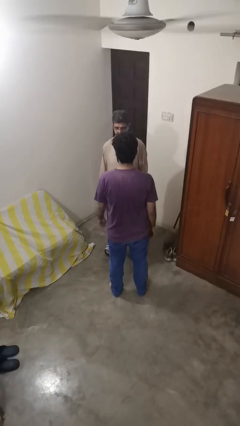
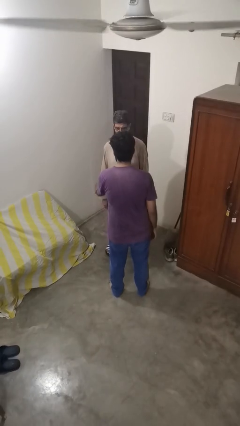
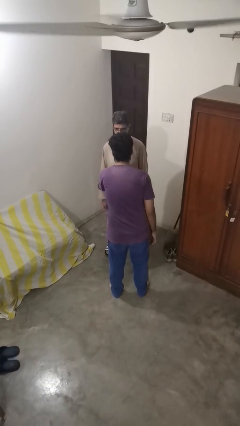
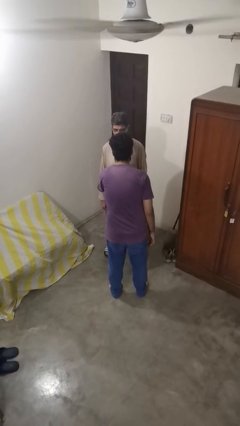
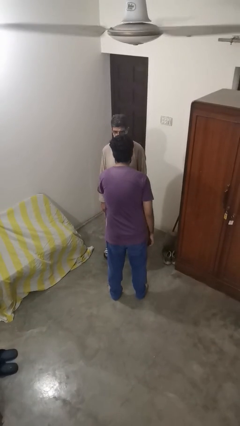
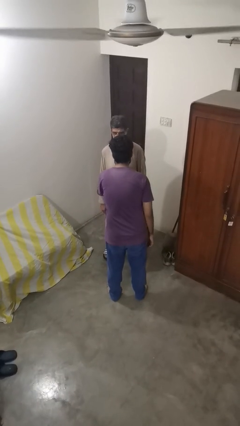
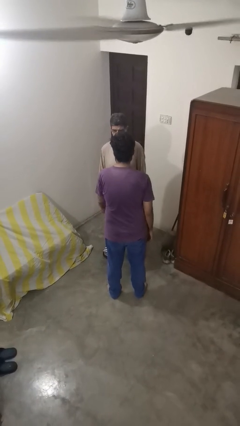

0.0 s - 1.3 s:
person grabs person by forearm

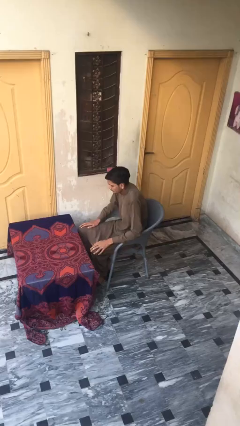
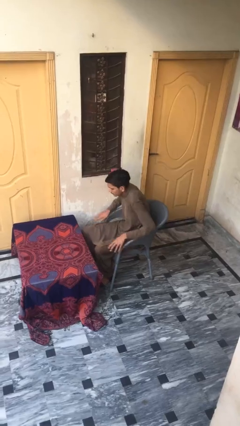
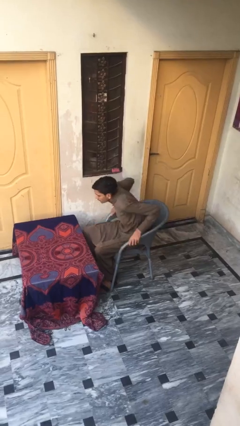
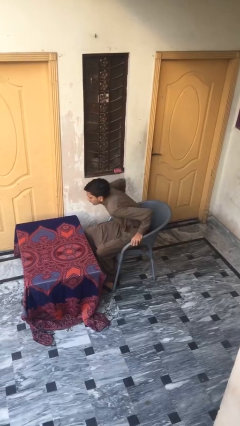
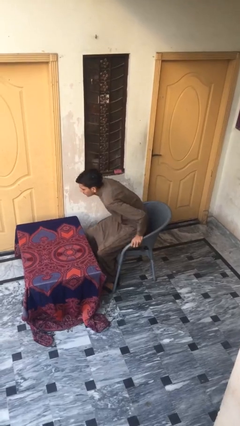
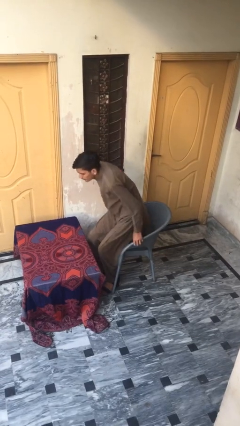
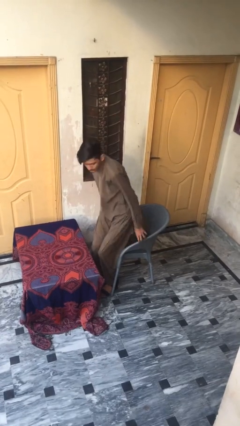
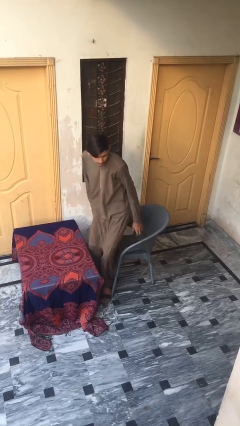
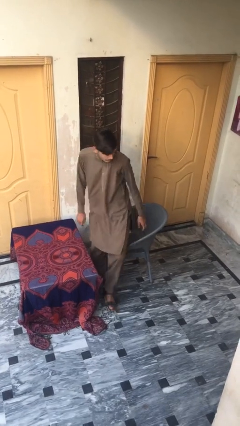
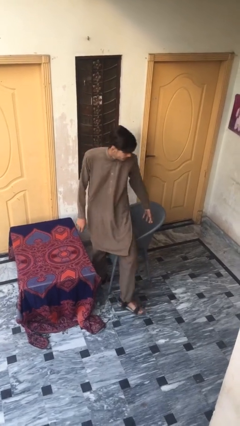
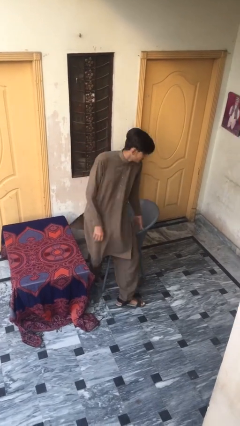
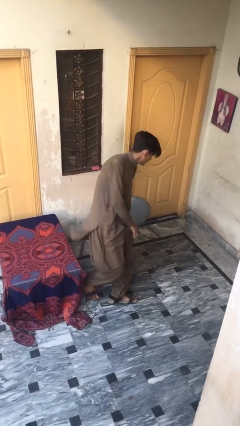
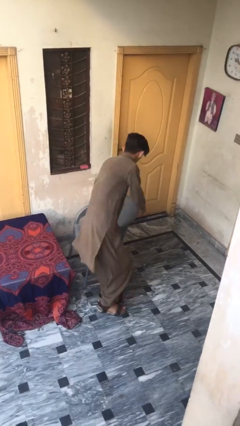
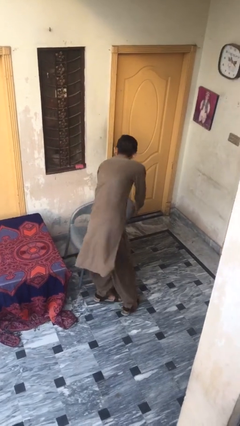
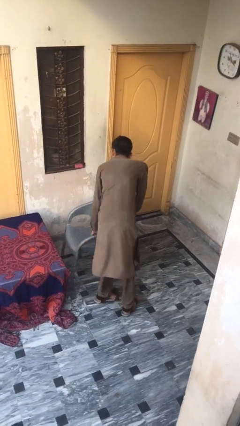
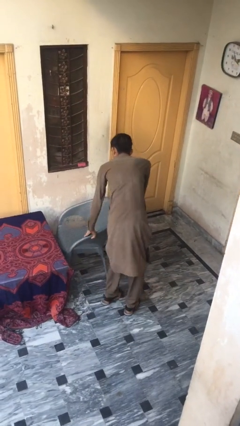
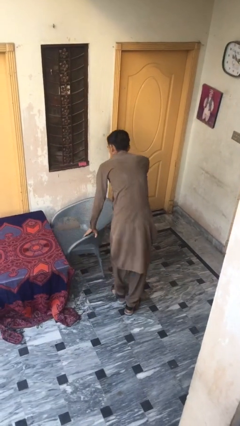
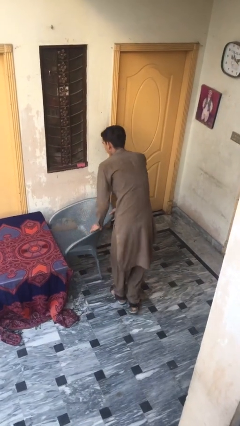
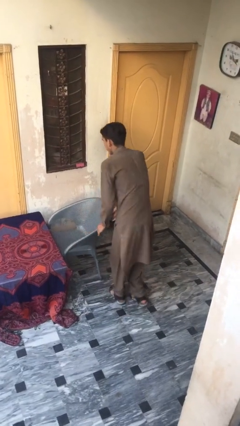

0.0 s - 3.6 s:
person stands up

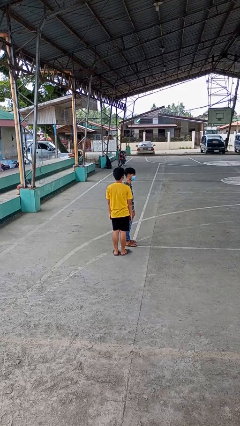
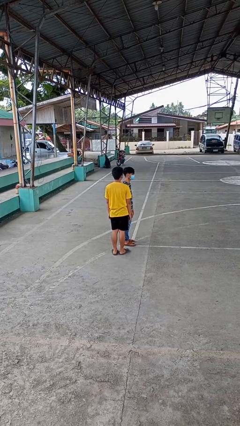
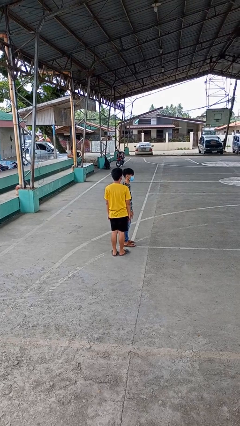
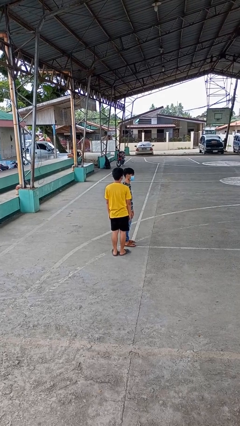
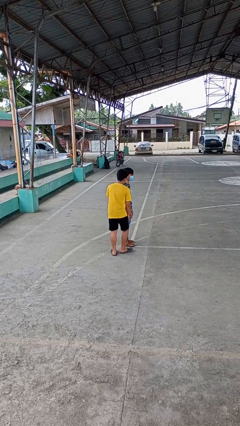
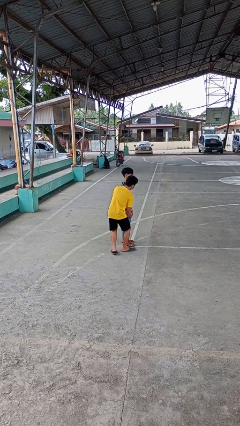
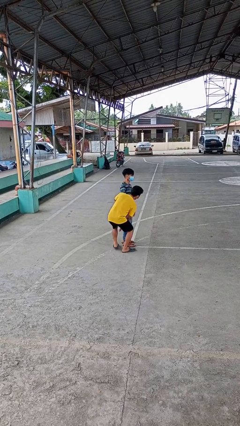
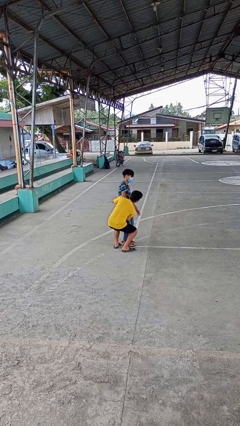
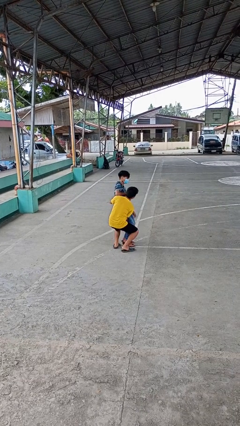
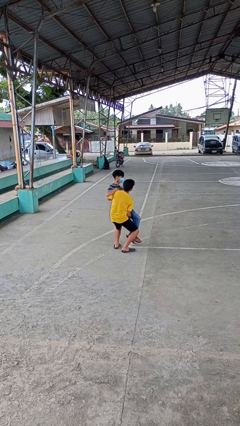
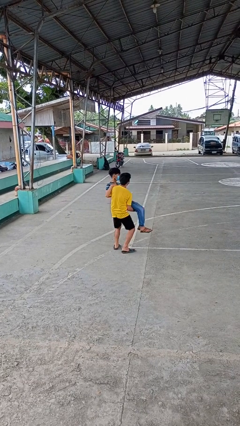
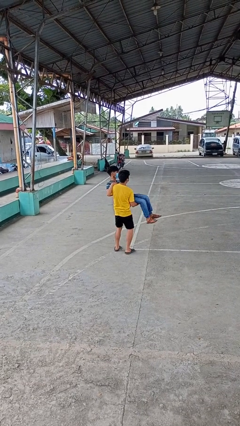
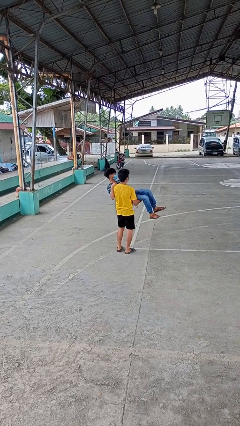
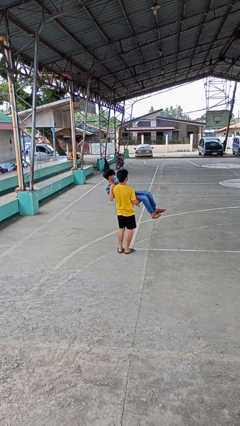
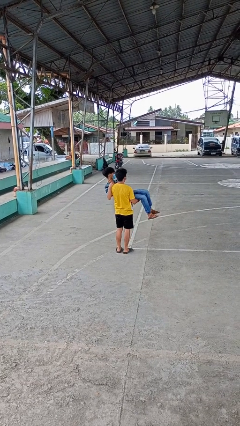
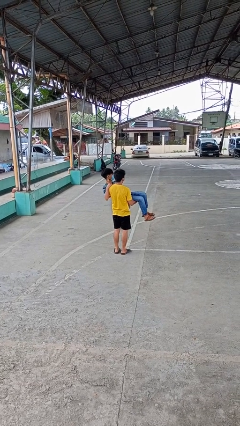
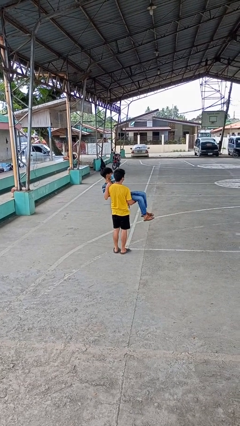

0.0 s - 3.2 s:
person picks up person

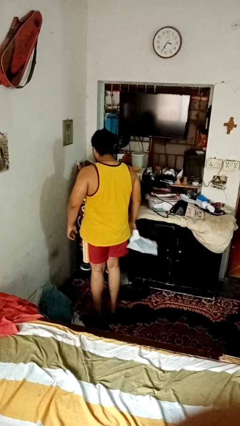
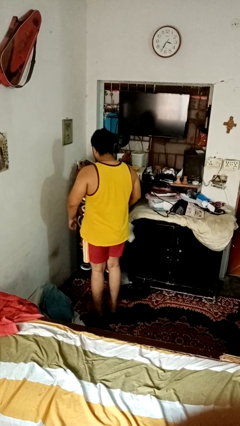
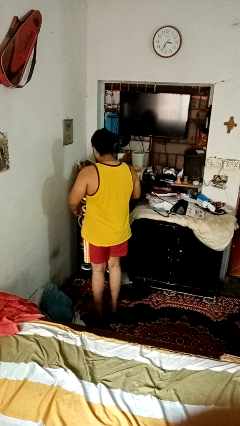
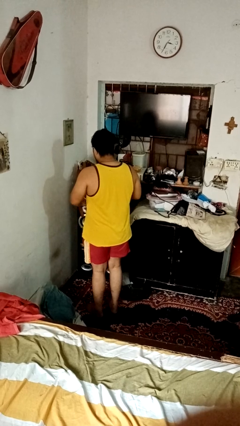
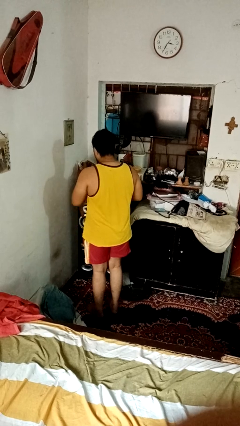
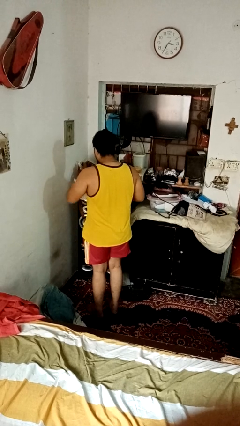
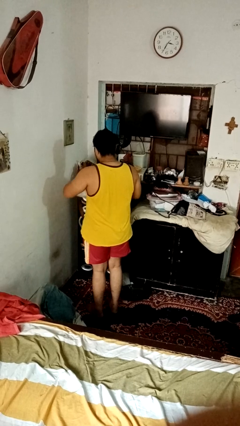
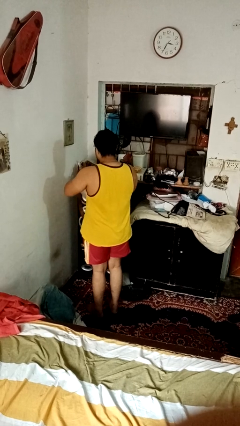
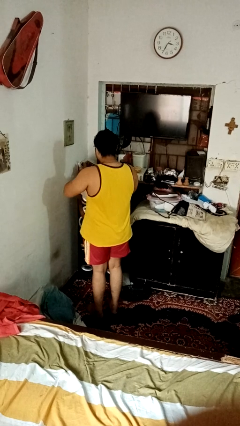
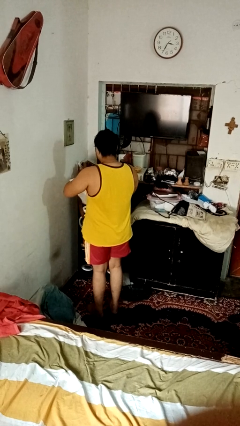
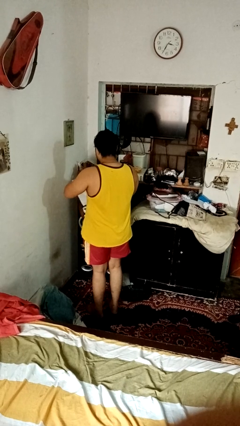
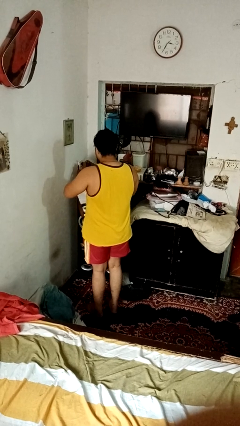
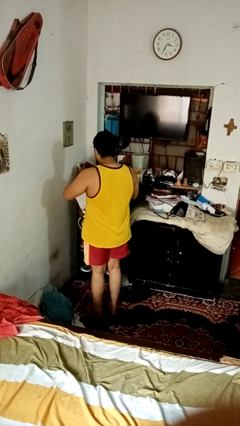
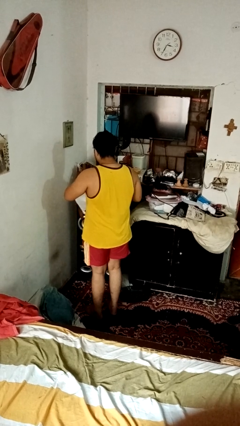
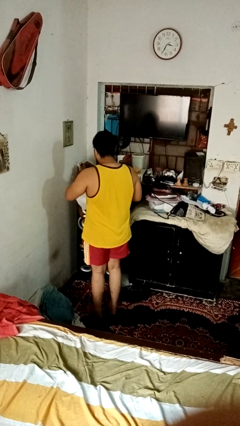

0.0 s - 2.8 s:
person tears paper

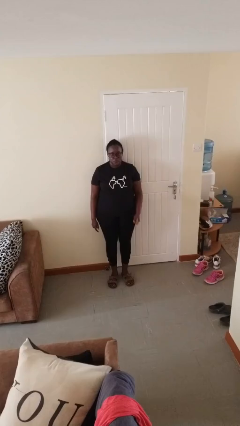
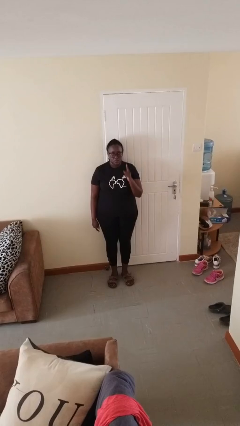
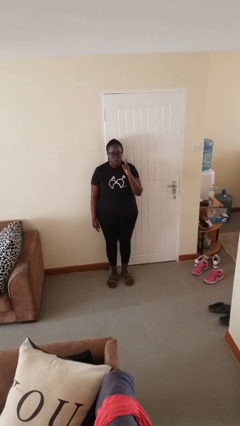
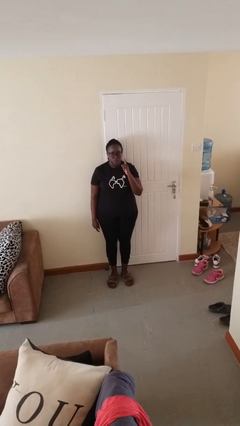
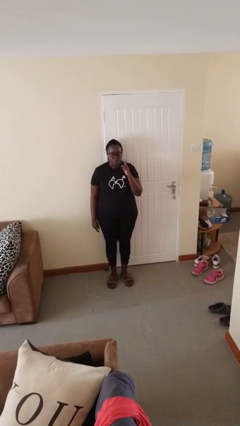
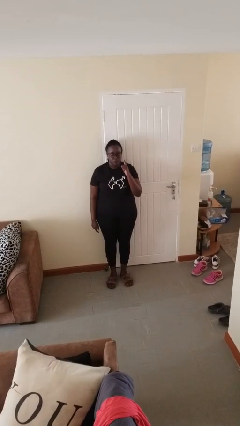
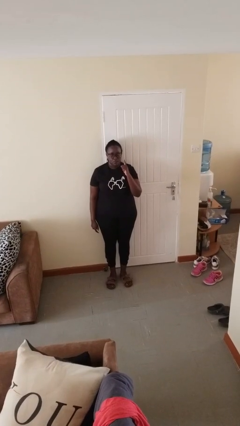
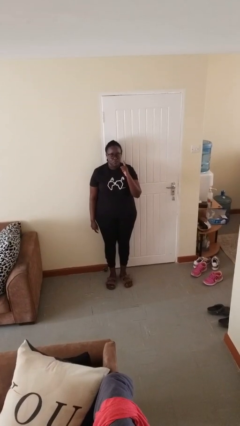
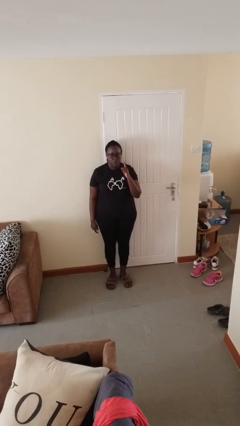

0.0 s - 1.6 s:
person gestures number one

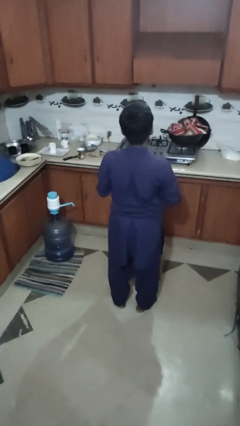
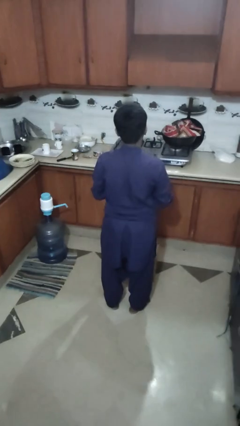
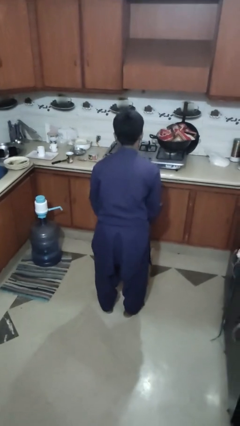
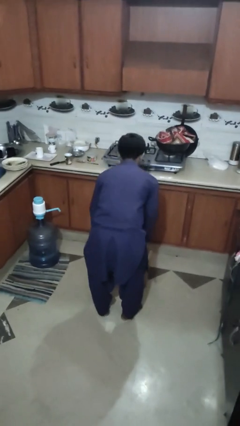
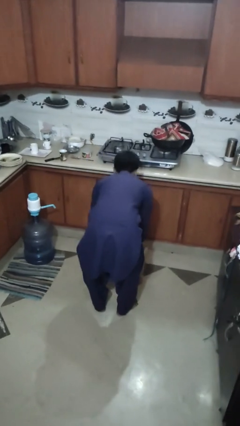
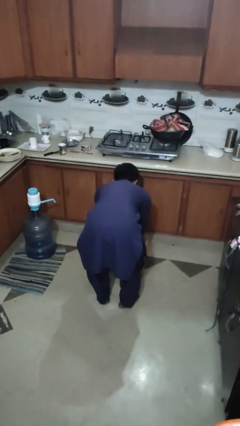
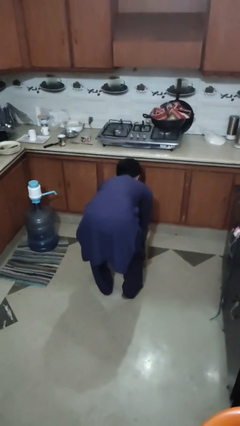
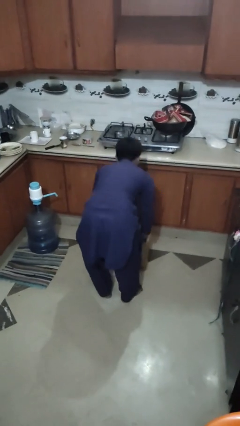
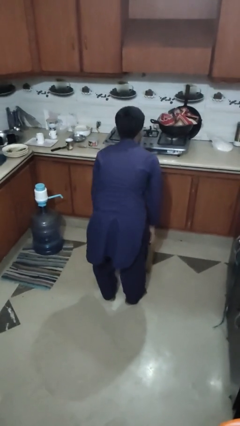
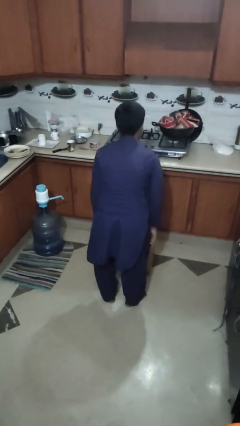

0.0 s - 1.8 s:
person puts object into box

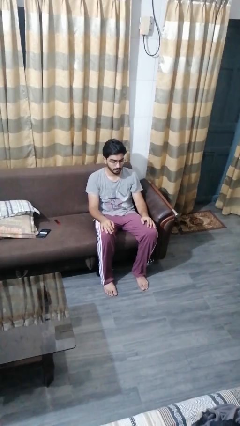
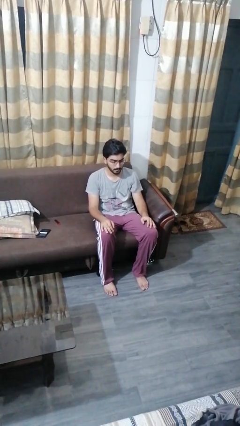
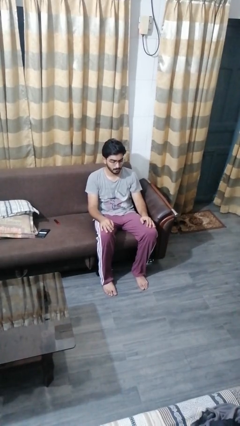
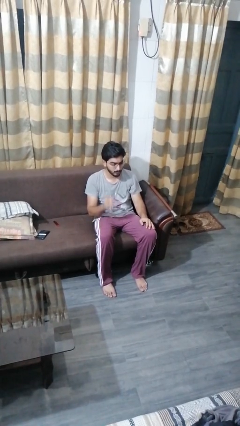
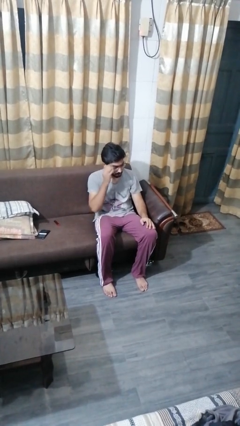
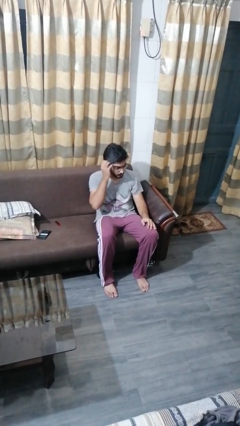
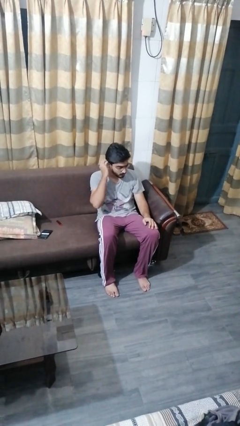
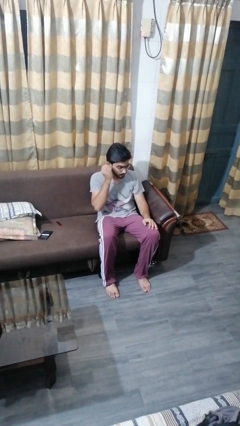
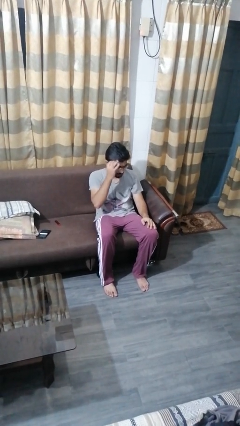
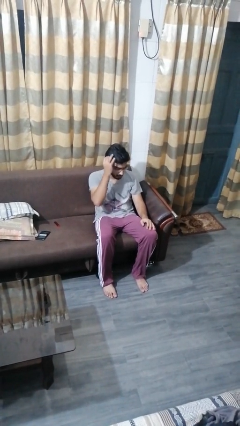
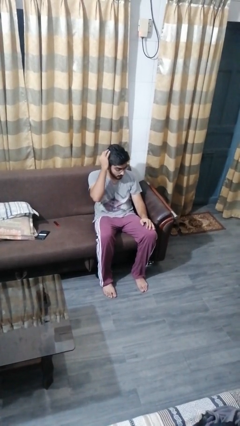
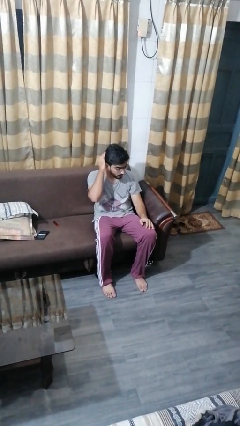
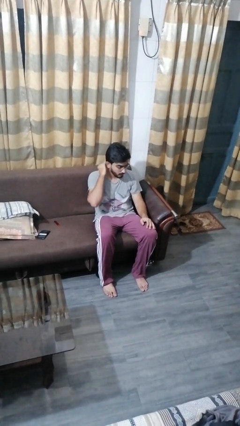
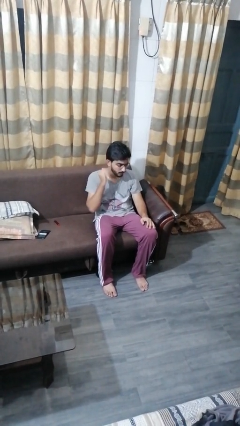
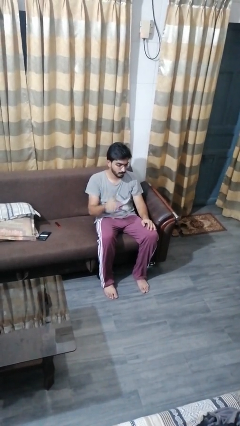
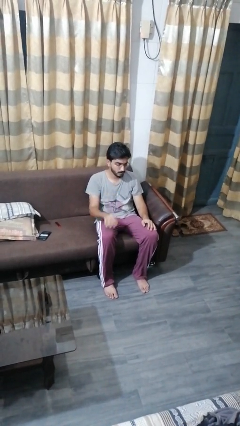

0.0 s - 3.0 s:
person strokes hair

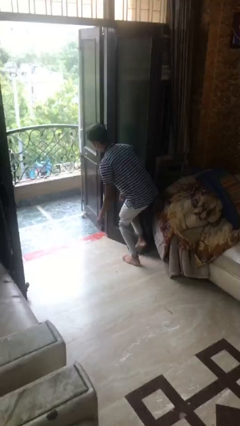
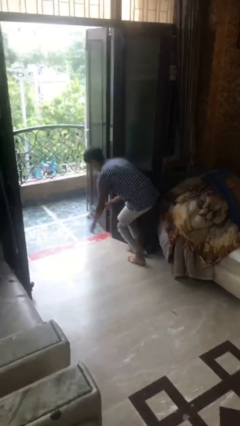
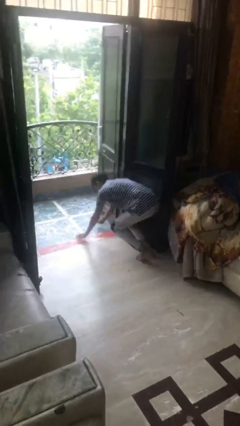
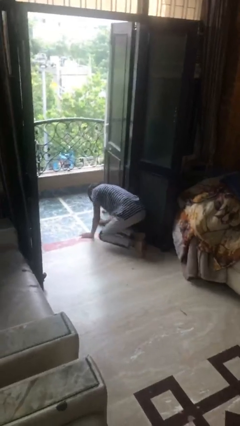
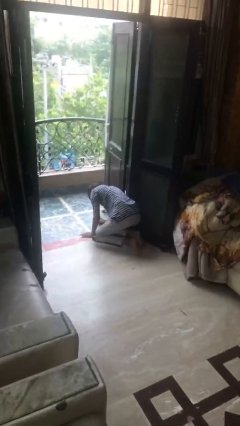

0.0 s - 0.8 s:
person trips on object on floor
